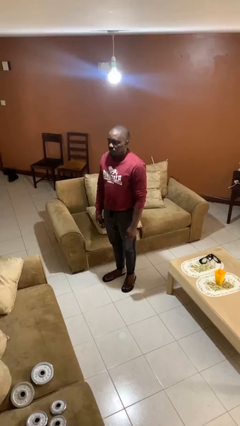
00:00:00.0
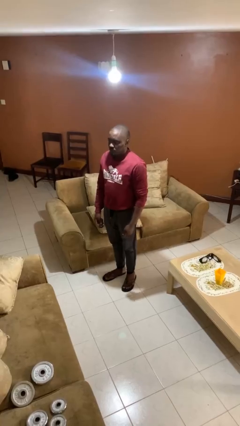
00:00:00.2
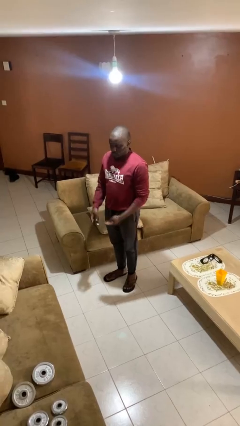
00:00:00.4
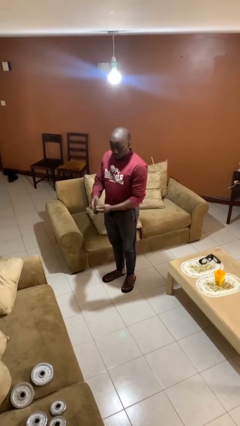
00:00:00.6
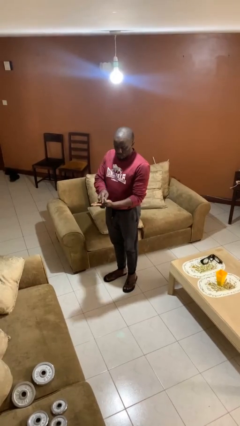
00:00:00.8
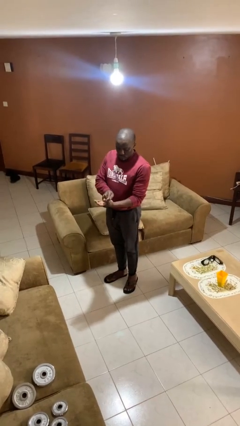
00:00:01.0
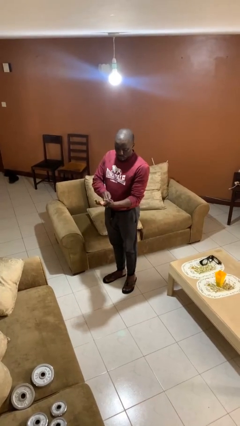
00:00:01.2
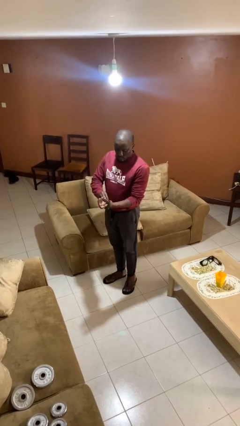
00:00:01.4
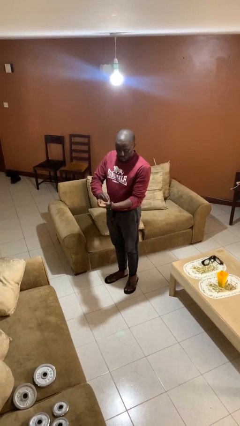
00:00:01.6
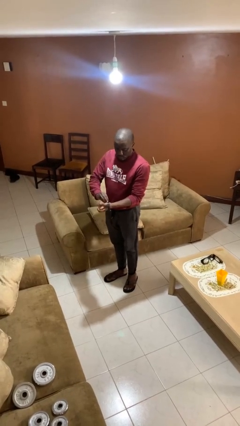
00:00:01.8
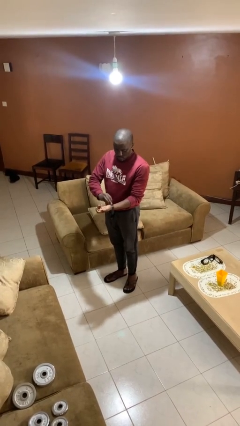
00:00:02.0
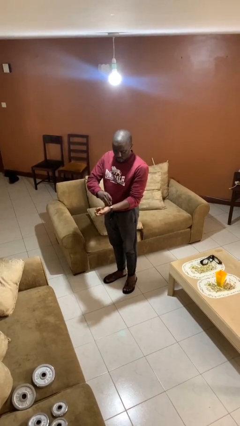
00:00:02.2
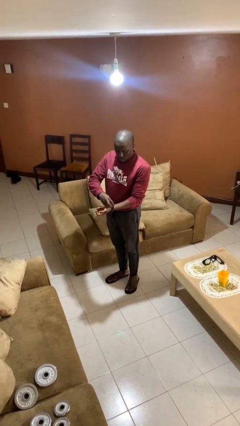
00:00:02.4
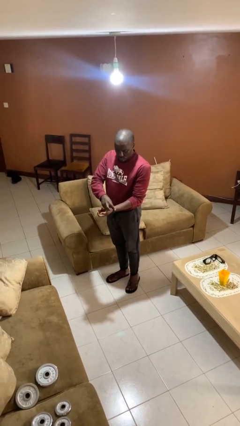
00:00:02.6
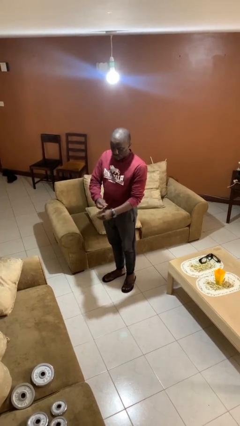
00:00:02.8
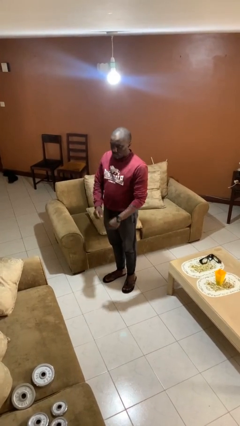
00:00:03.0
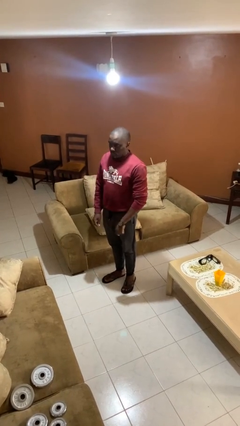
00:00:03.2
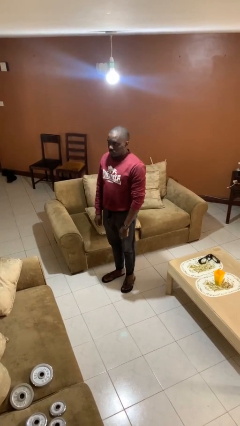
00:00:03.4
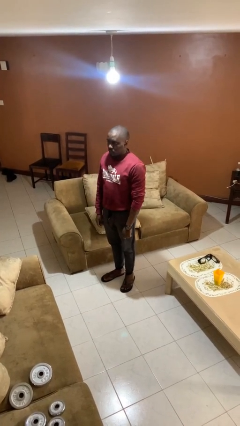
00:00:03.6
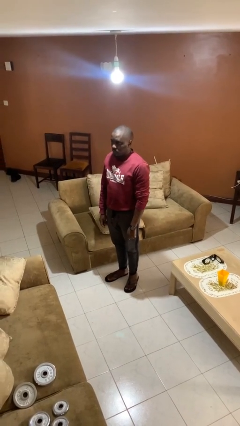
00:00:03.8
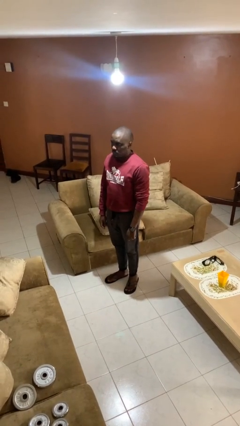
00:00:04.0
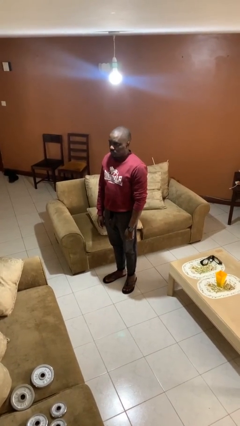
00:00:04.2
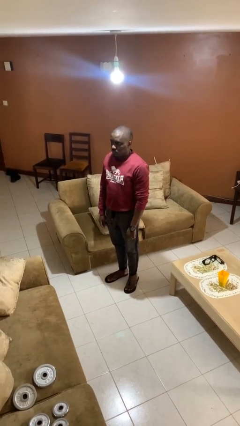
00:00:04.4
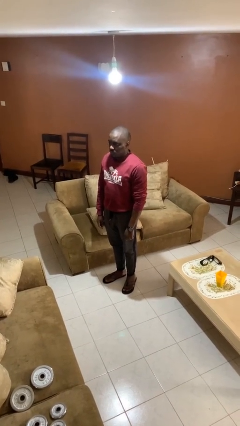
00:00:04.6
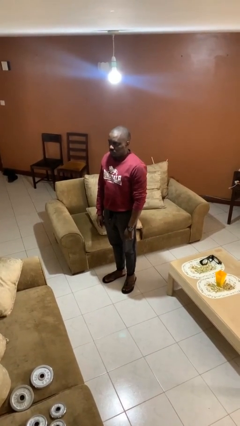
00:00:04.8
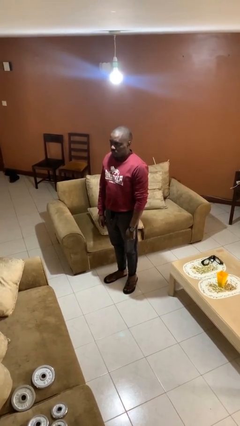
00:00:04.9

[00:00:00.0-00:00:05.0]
person puts on wristwatch

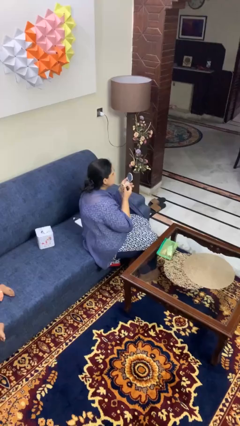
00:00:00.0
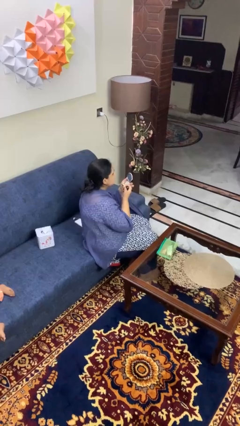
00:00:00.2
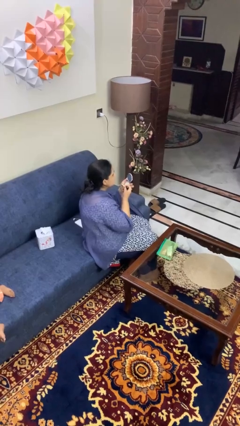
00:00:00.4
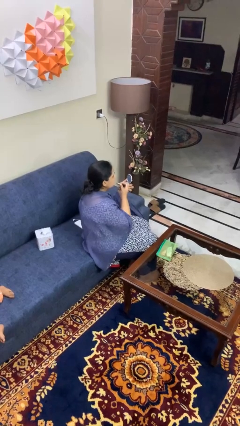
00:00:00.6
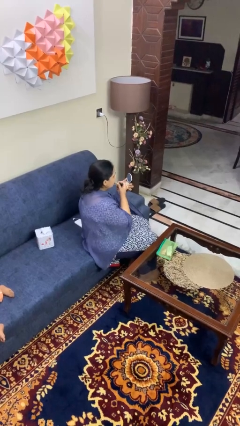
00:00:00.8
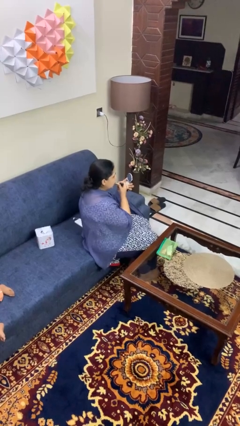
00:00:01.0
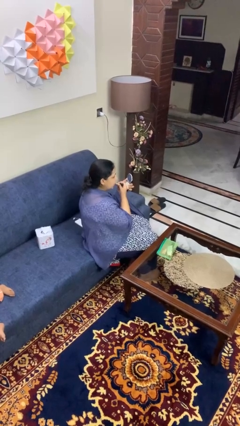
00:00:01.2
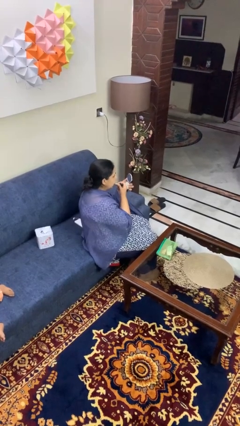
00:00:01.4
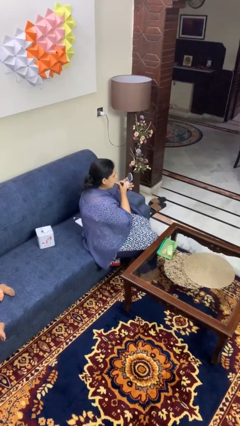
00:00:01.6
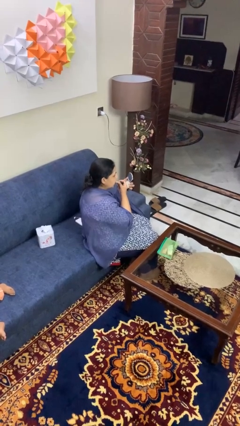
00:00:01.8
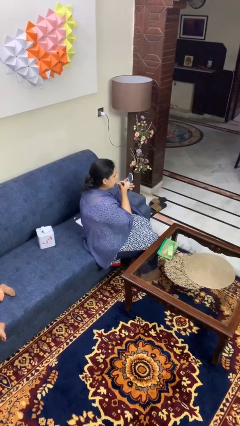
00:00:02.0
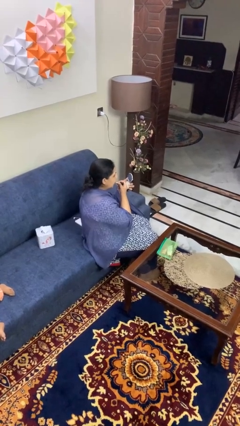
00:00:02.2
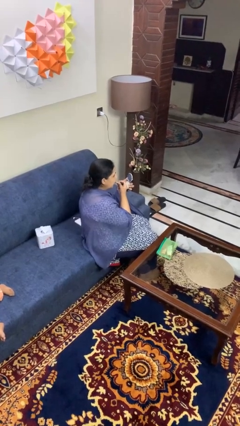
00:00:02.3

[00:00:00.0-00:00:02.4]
person applies lip makeup

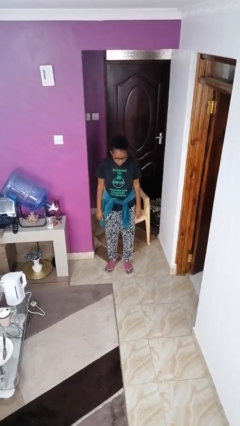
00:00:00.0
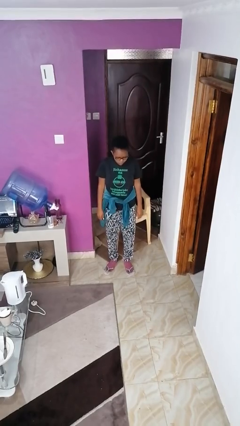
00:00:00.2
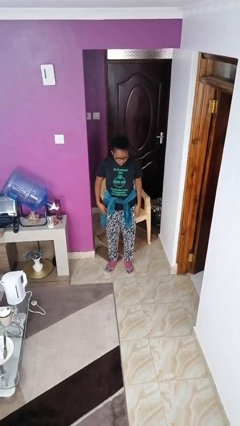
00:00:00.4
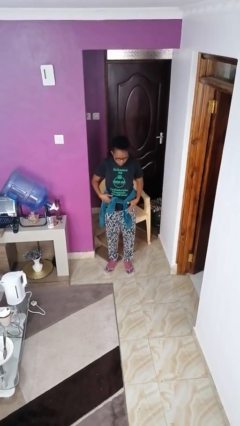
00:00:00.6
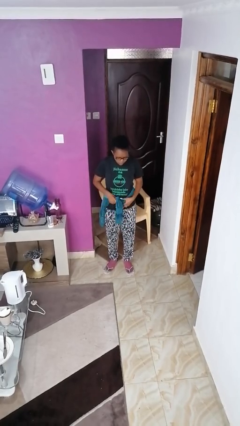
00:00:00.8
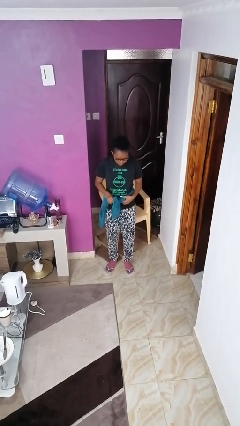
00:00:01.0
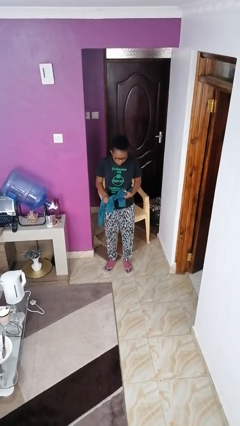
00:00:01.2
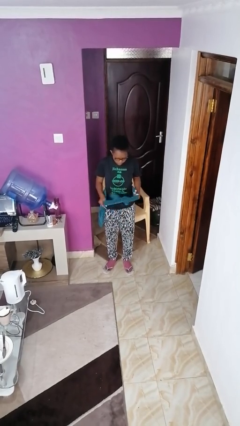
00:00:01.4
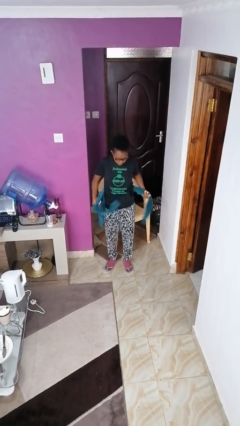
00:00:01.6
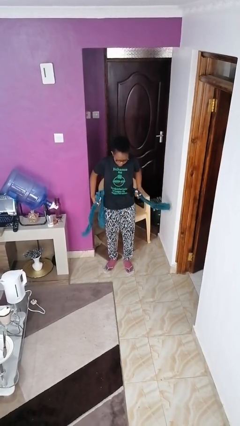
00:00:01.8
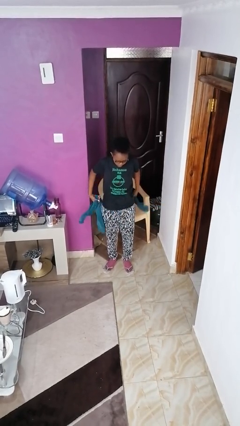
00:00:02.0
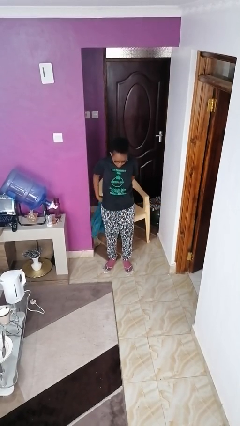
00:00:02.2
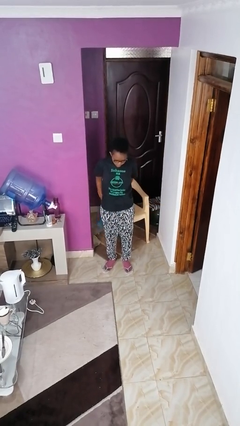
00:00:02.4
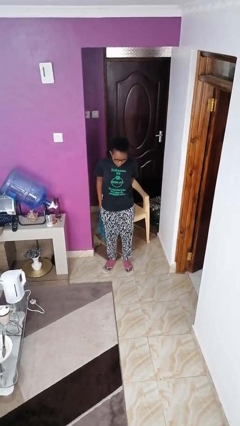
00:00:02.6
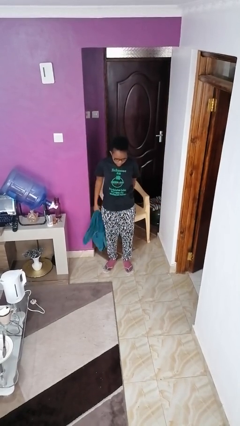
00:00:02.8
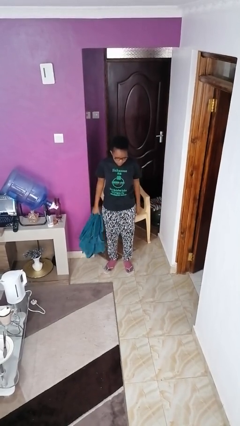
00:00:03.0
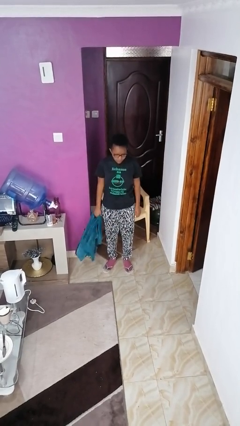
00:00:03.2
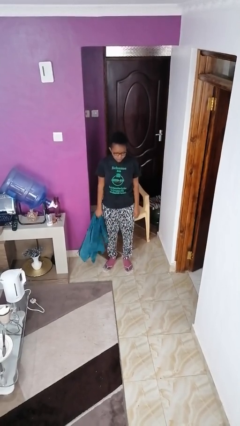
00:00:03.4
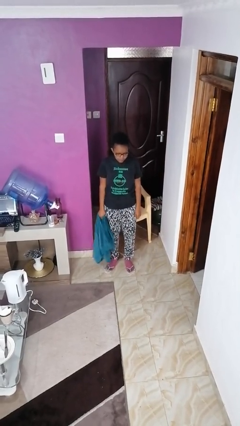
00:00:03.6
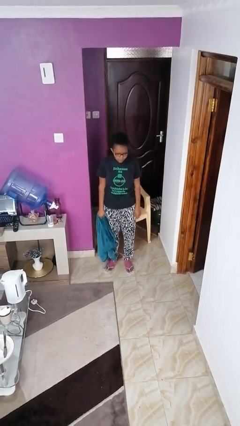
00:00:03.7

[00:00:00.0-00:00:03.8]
person unties jacket around waist

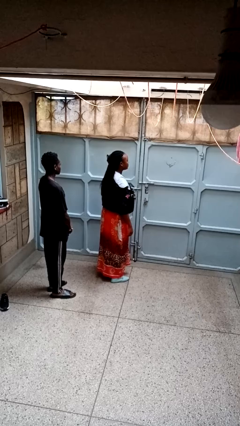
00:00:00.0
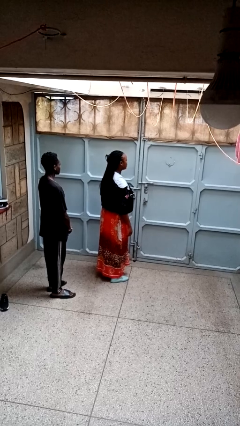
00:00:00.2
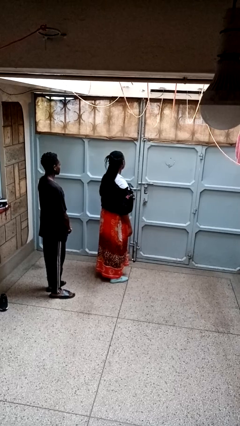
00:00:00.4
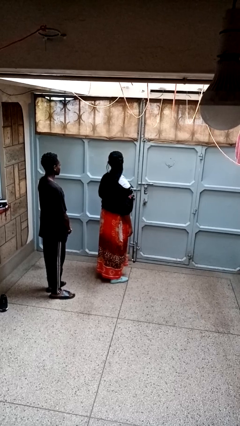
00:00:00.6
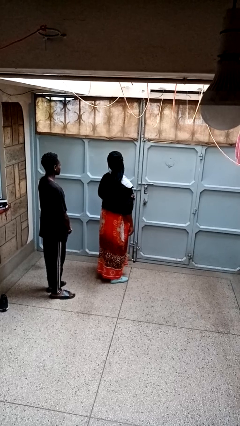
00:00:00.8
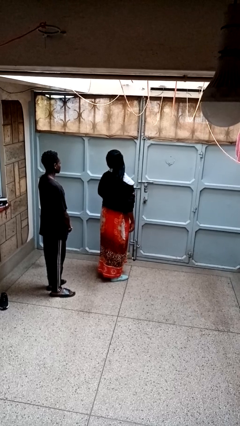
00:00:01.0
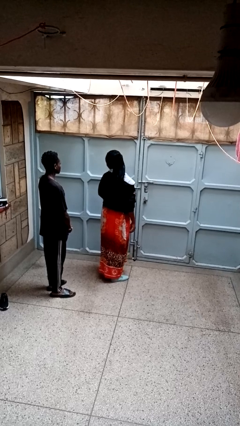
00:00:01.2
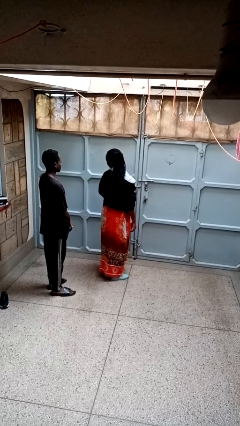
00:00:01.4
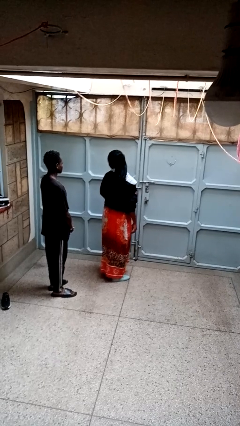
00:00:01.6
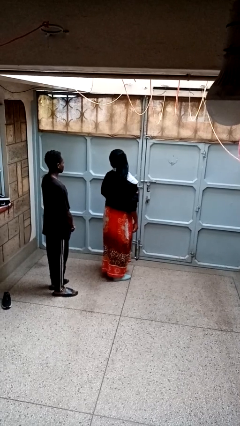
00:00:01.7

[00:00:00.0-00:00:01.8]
person looks over shoulder

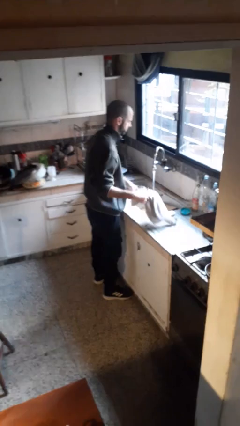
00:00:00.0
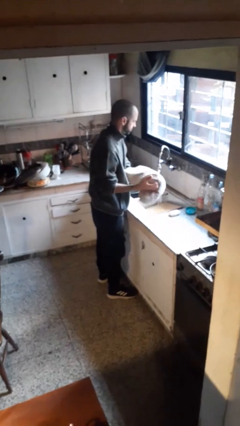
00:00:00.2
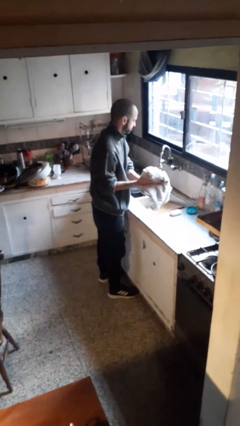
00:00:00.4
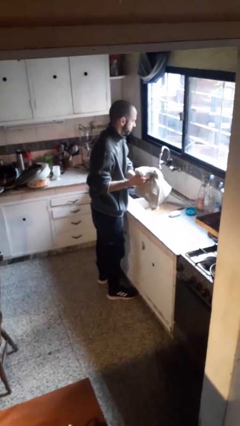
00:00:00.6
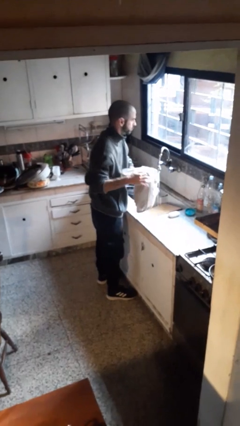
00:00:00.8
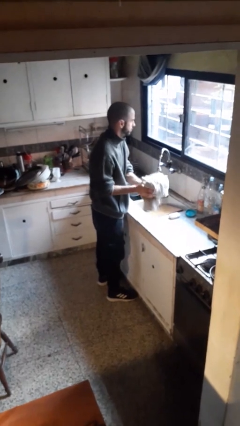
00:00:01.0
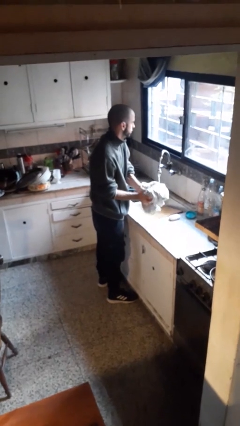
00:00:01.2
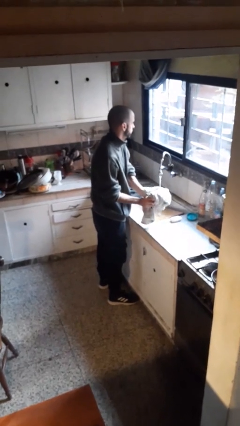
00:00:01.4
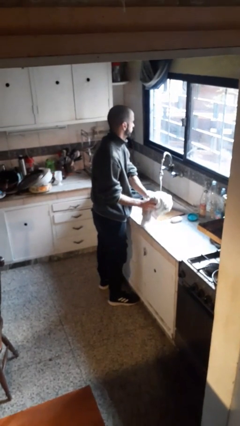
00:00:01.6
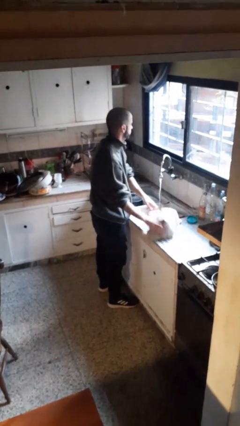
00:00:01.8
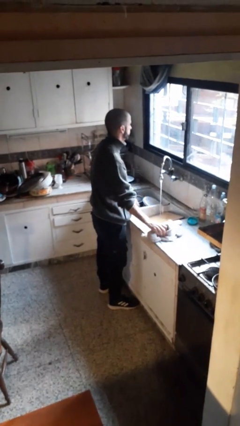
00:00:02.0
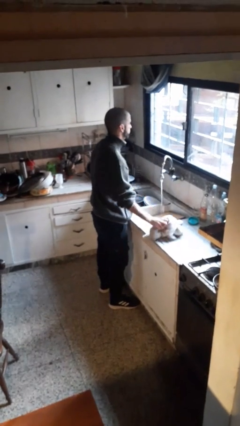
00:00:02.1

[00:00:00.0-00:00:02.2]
person dries hands with towel

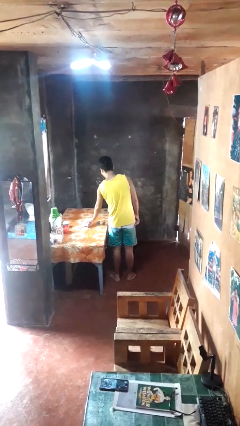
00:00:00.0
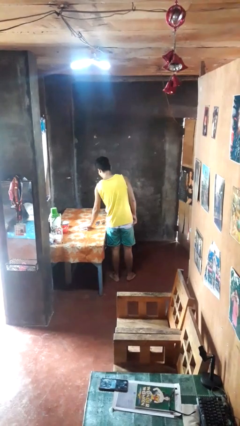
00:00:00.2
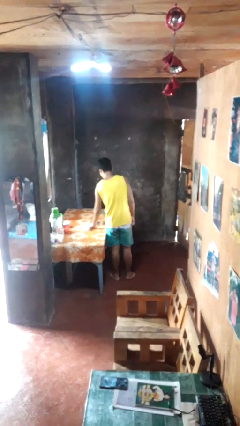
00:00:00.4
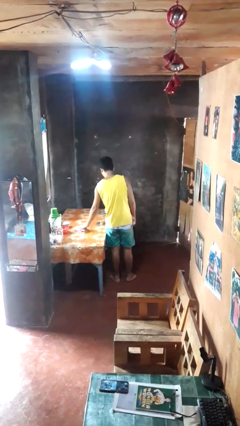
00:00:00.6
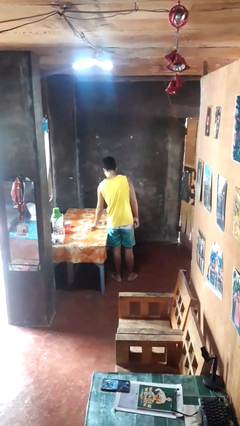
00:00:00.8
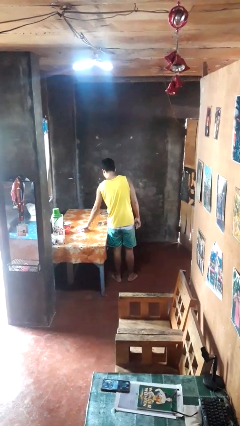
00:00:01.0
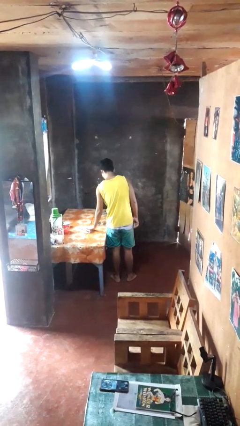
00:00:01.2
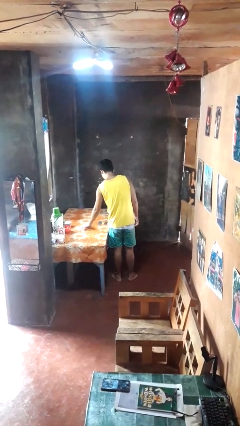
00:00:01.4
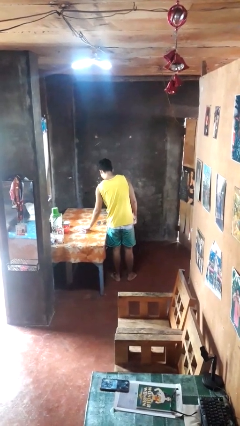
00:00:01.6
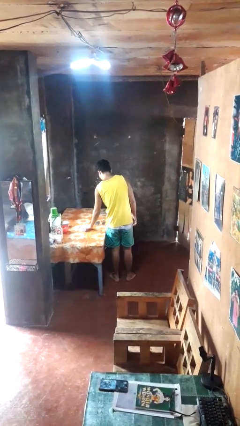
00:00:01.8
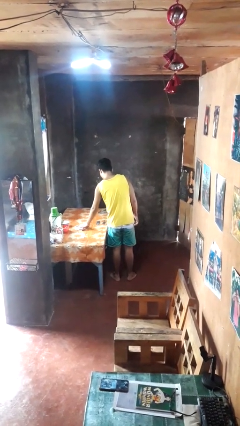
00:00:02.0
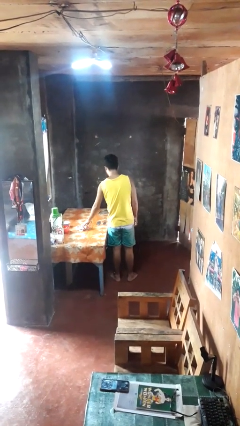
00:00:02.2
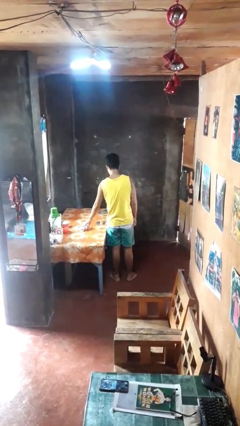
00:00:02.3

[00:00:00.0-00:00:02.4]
person cleans table with rag
